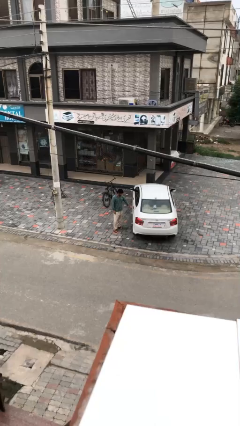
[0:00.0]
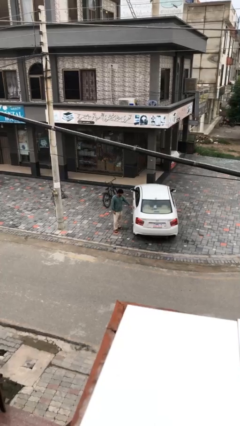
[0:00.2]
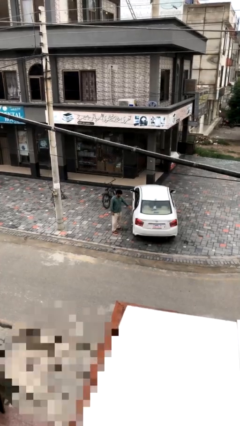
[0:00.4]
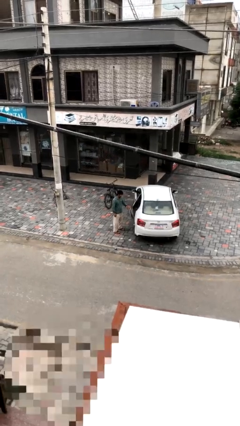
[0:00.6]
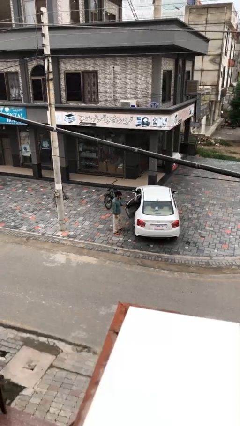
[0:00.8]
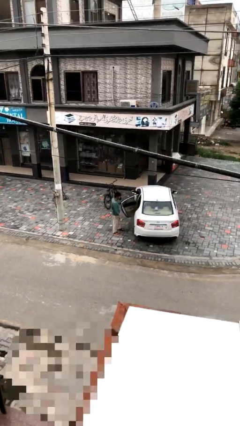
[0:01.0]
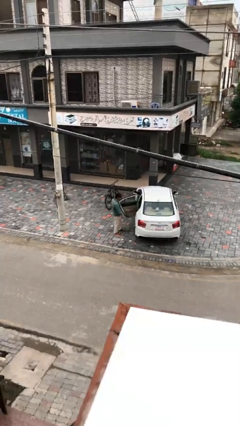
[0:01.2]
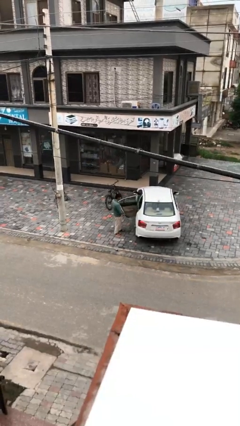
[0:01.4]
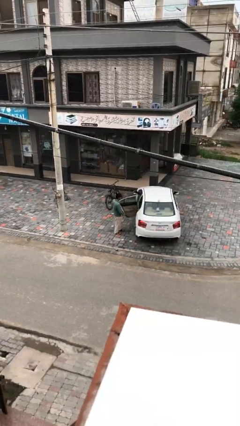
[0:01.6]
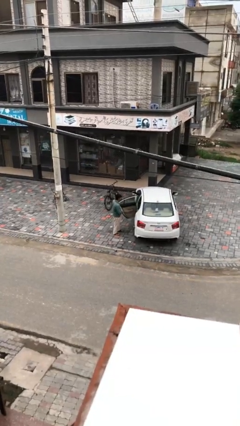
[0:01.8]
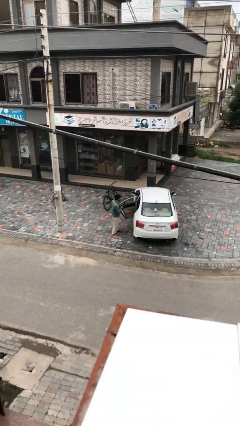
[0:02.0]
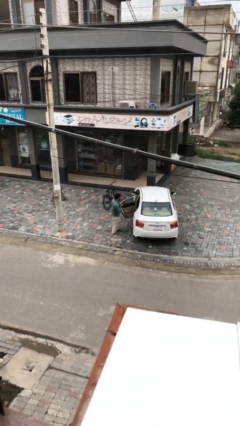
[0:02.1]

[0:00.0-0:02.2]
person opens car door

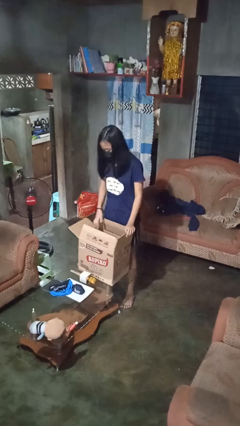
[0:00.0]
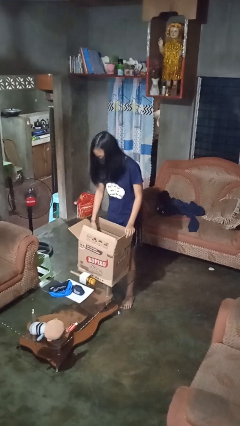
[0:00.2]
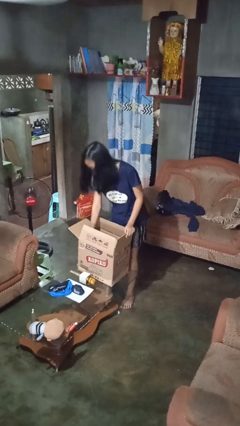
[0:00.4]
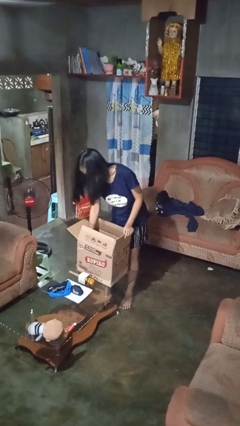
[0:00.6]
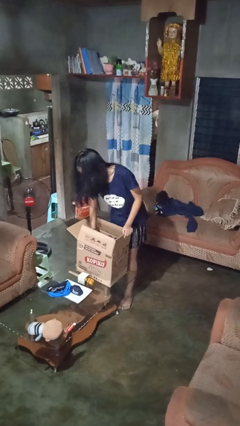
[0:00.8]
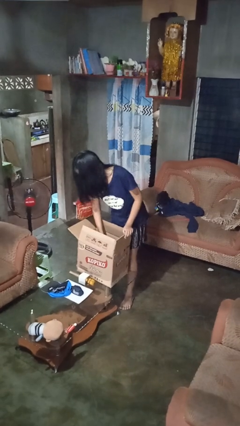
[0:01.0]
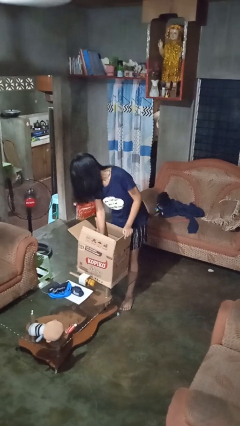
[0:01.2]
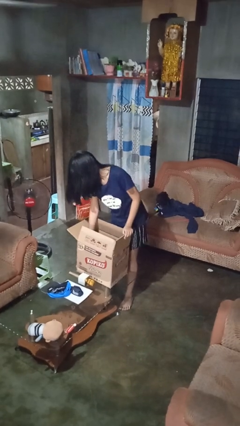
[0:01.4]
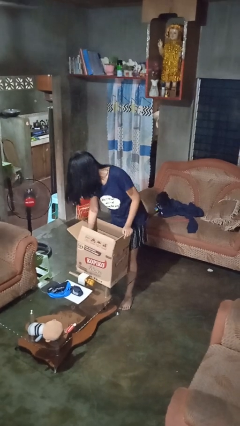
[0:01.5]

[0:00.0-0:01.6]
person searches in box

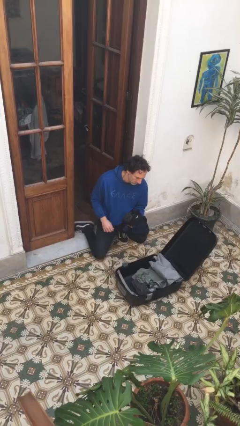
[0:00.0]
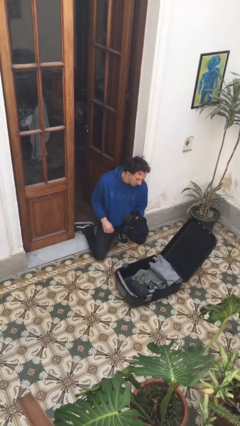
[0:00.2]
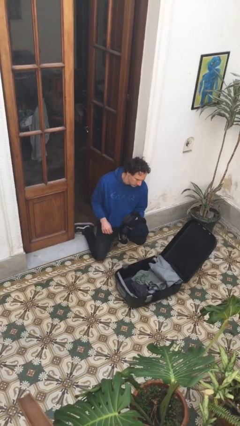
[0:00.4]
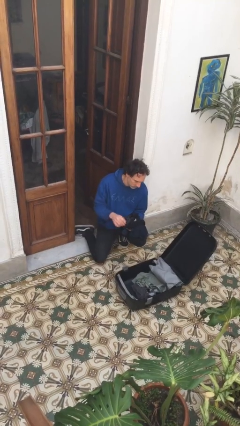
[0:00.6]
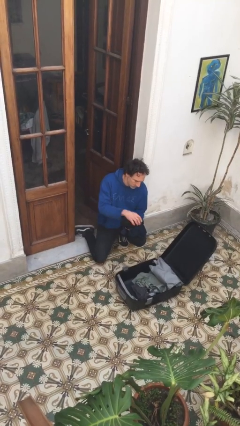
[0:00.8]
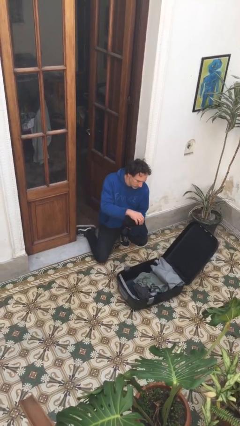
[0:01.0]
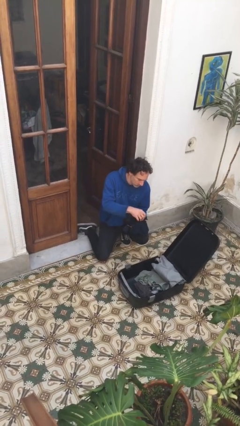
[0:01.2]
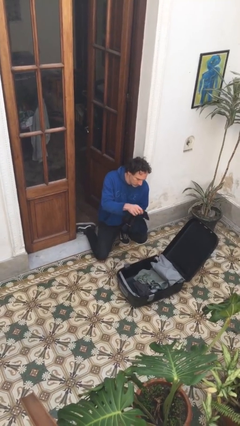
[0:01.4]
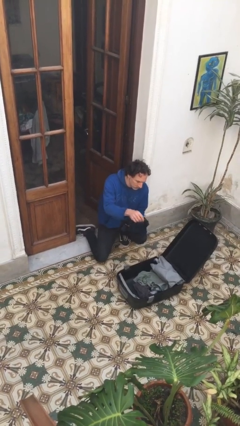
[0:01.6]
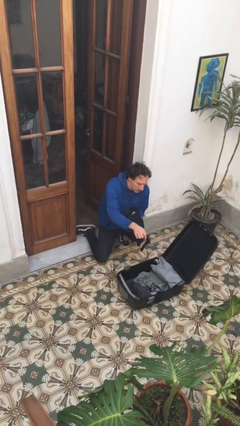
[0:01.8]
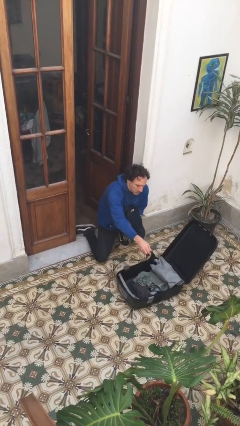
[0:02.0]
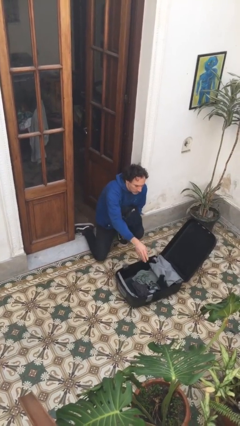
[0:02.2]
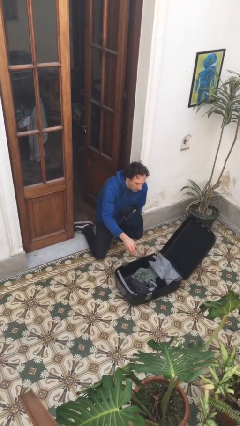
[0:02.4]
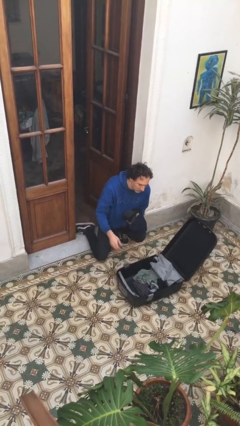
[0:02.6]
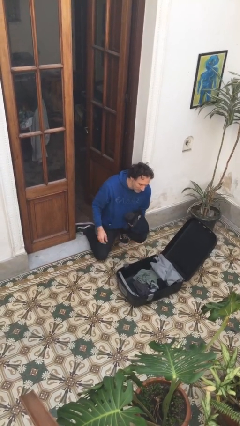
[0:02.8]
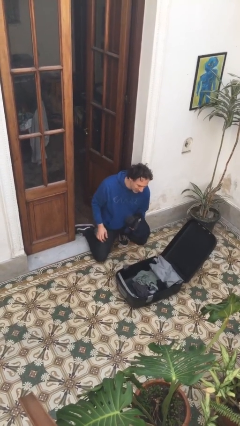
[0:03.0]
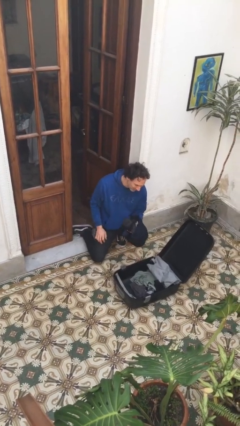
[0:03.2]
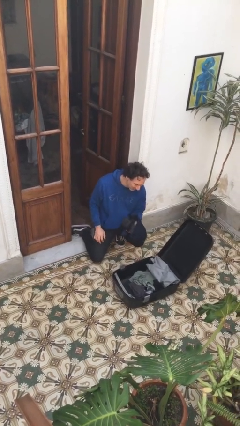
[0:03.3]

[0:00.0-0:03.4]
person loads clothes into suitcase

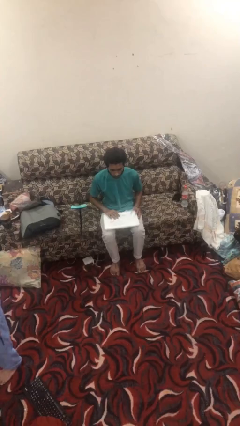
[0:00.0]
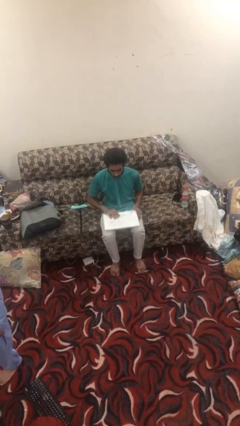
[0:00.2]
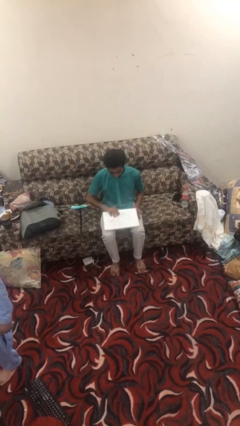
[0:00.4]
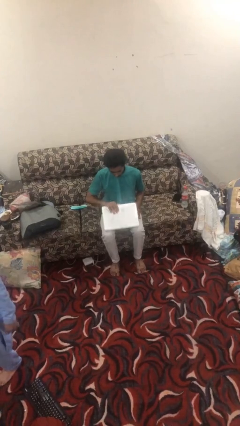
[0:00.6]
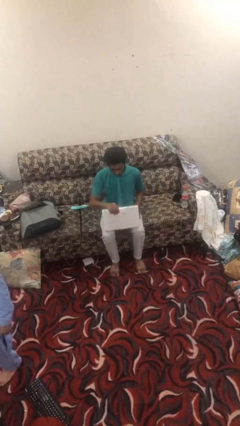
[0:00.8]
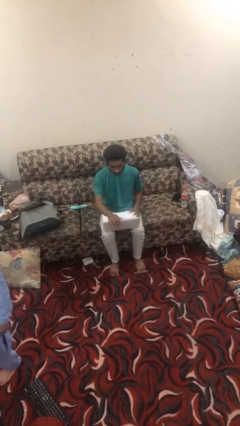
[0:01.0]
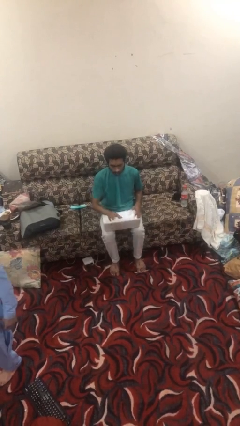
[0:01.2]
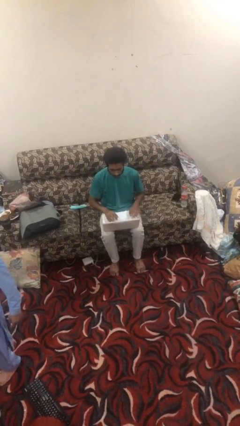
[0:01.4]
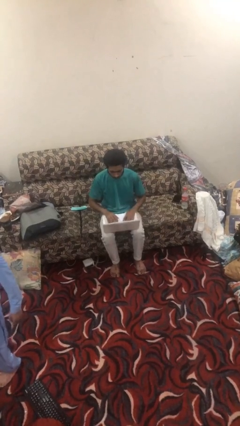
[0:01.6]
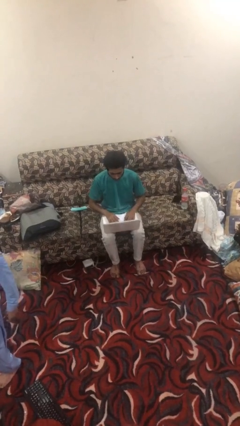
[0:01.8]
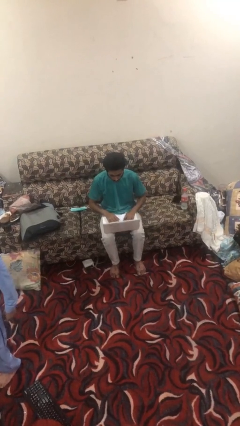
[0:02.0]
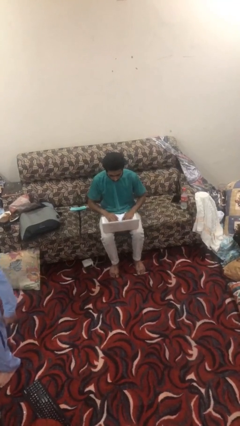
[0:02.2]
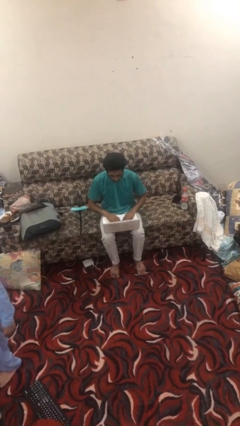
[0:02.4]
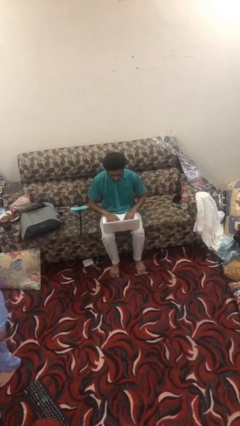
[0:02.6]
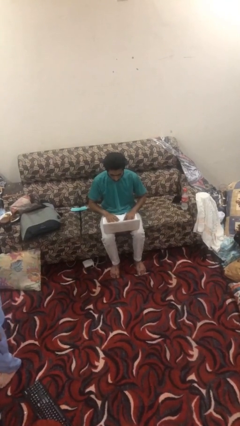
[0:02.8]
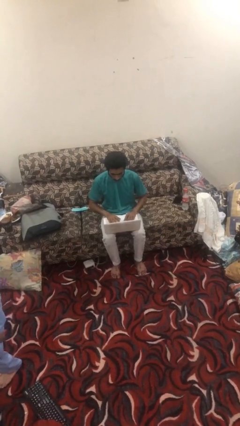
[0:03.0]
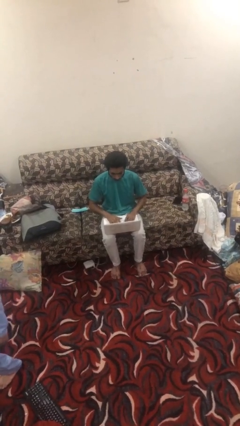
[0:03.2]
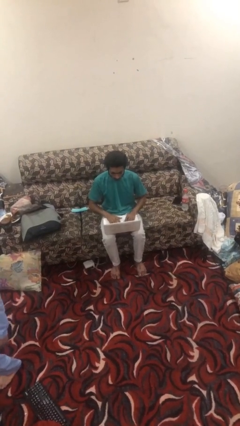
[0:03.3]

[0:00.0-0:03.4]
person opens laptop

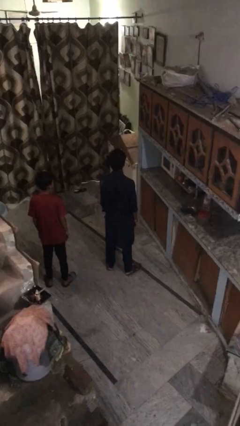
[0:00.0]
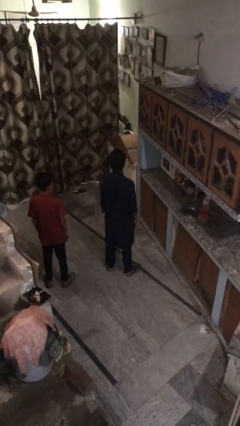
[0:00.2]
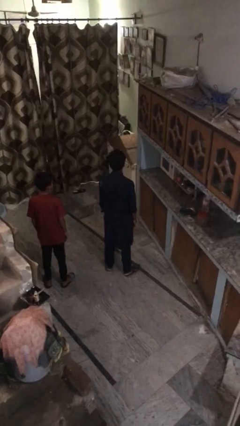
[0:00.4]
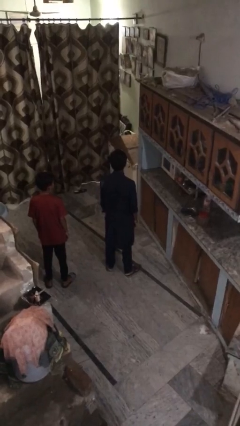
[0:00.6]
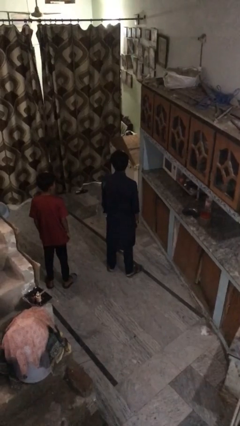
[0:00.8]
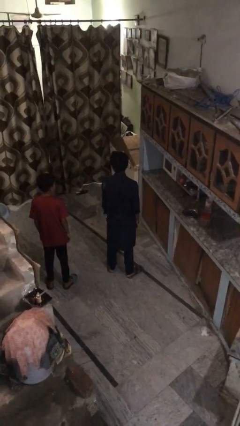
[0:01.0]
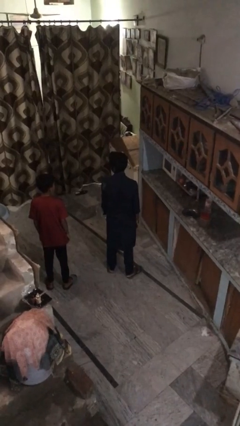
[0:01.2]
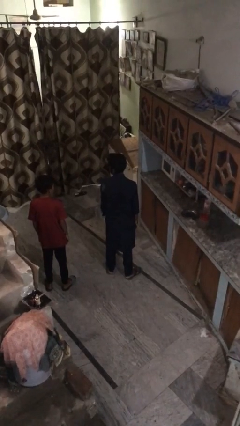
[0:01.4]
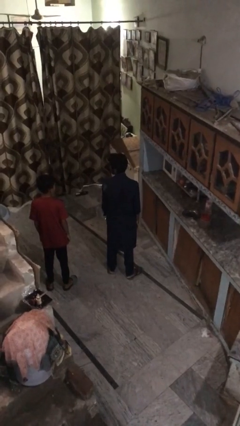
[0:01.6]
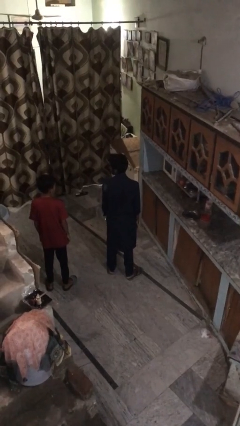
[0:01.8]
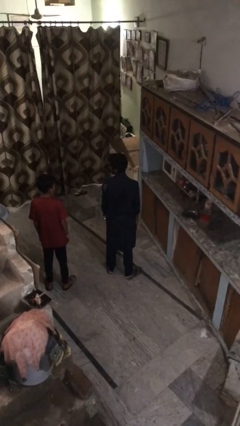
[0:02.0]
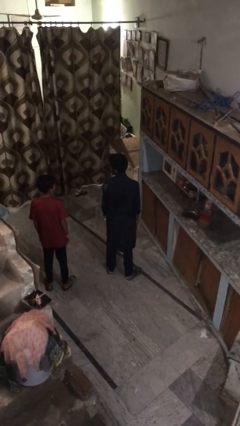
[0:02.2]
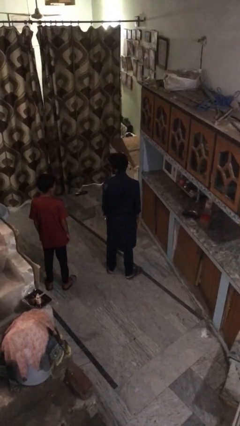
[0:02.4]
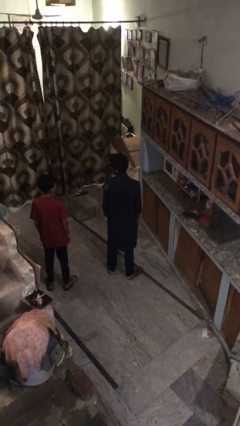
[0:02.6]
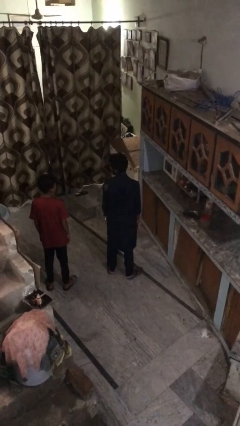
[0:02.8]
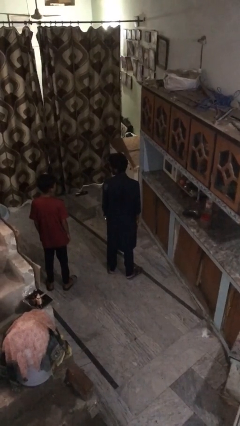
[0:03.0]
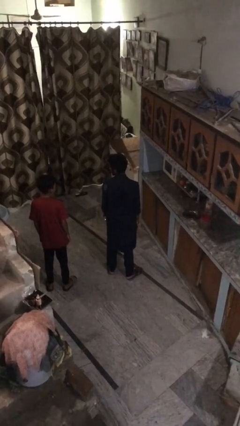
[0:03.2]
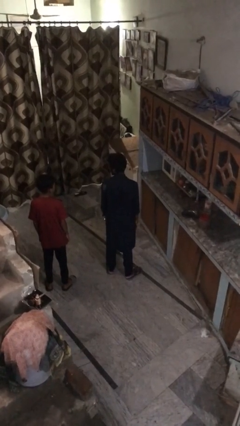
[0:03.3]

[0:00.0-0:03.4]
person looks over shoulder

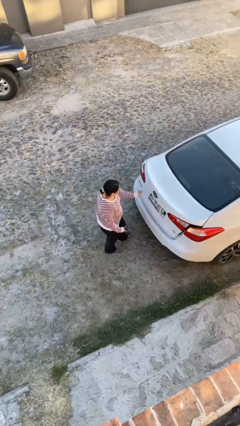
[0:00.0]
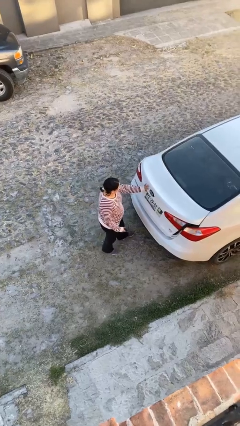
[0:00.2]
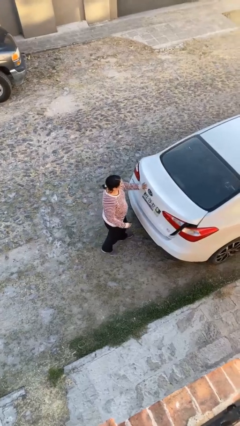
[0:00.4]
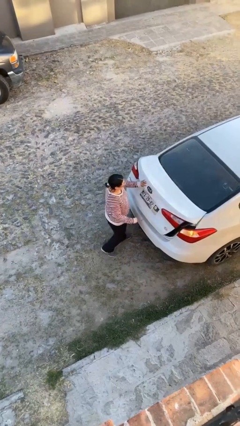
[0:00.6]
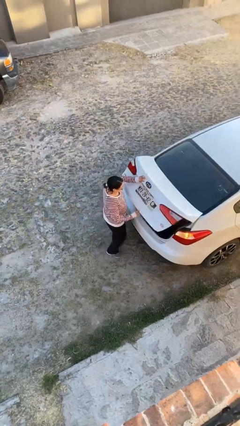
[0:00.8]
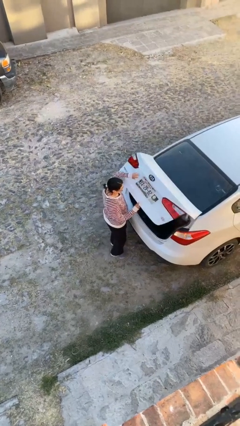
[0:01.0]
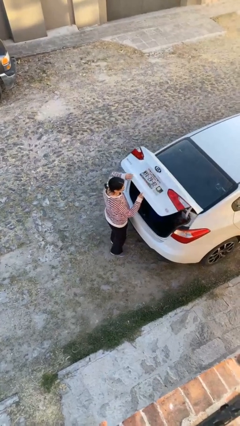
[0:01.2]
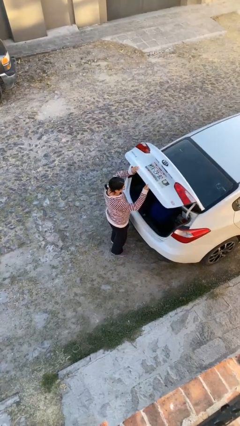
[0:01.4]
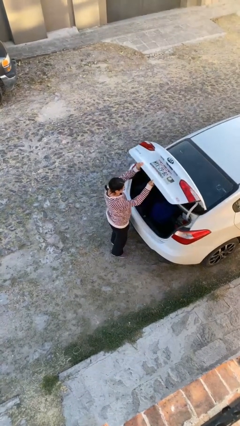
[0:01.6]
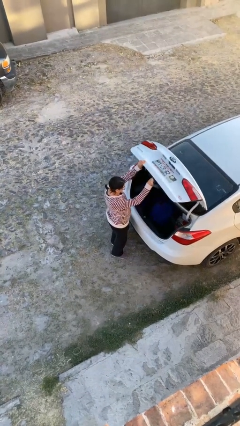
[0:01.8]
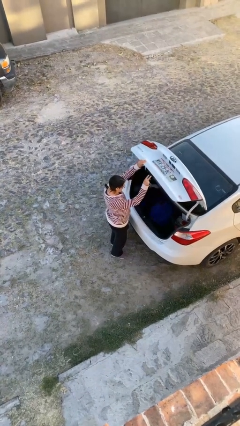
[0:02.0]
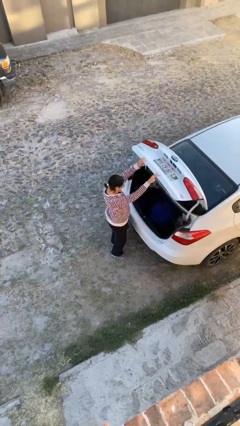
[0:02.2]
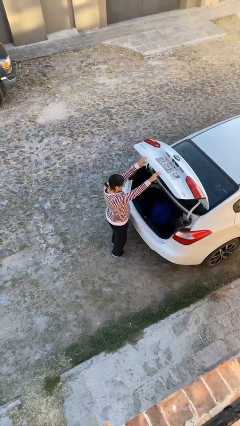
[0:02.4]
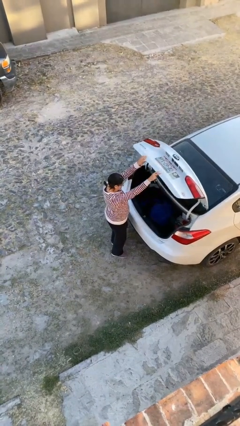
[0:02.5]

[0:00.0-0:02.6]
person opens car trunk

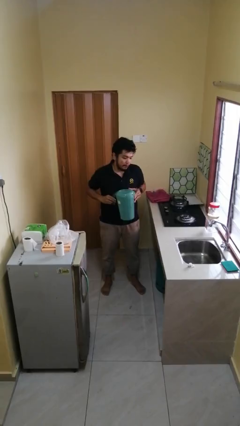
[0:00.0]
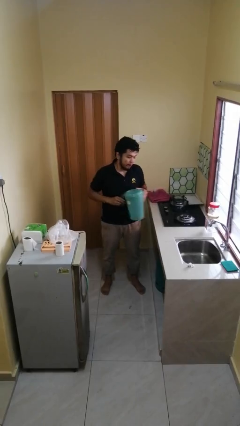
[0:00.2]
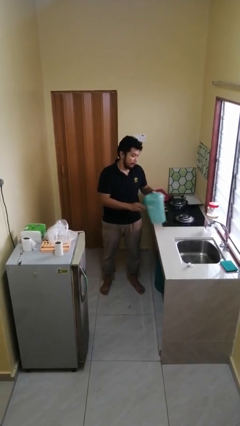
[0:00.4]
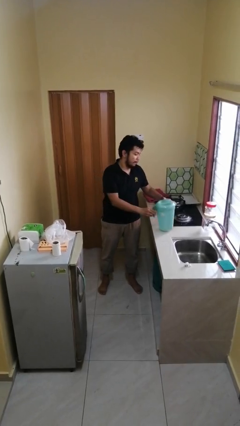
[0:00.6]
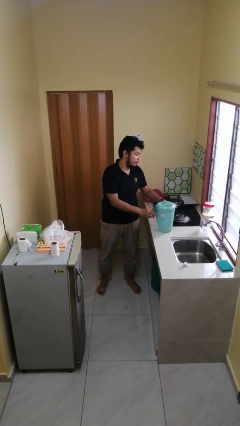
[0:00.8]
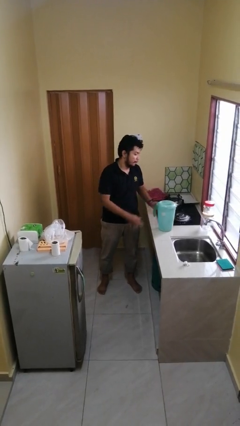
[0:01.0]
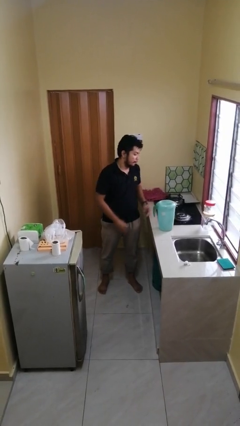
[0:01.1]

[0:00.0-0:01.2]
person puts down object on countertop
